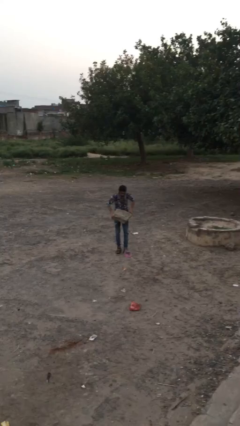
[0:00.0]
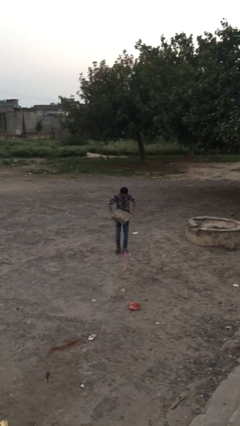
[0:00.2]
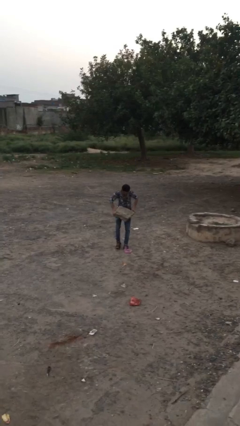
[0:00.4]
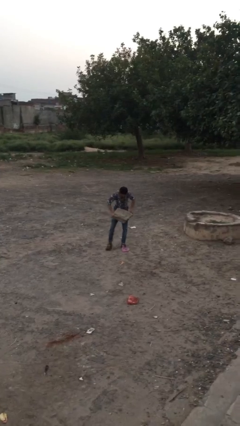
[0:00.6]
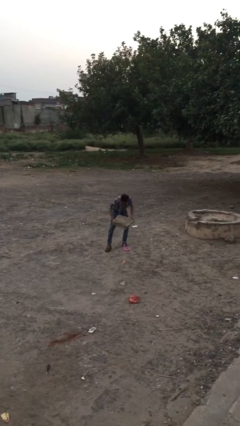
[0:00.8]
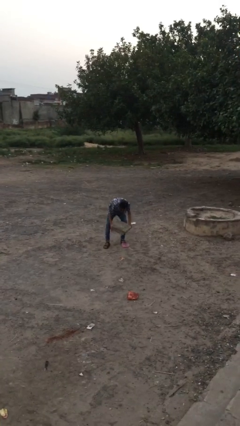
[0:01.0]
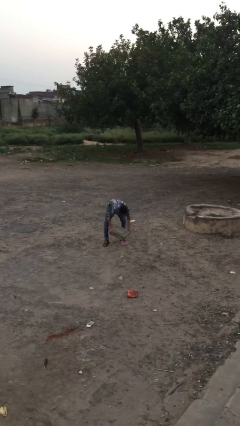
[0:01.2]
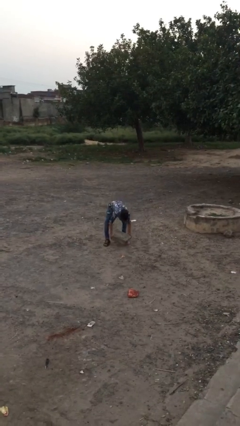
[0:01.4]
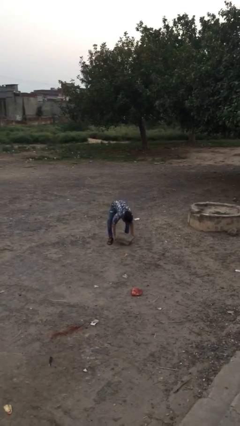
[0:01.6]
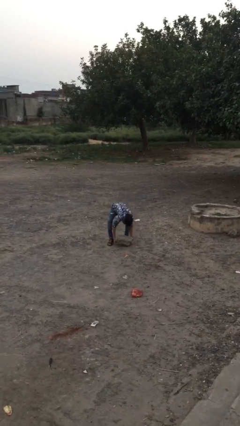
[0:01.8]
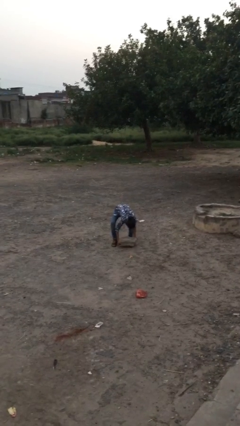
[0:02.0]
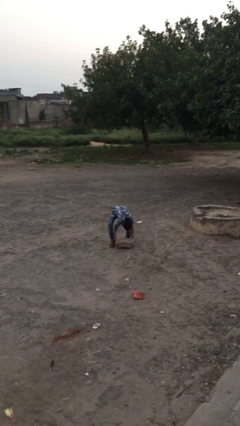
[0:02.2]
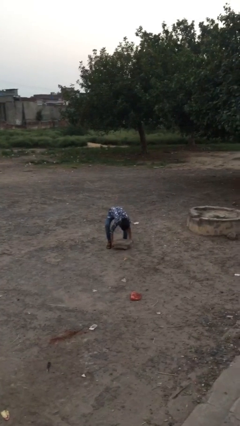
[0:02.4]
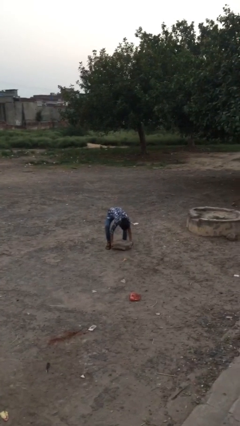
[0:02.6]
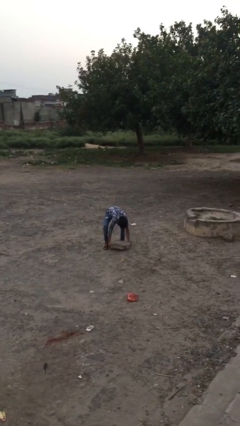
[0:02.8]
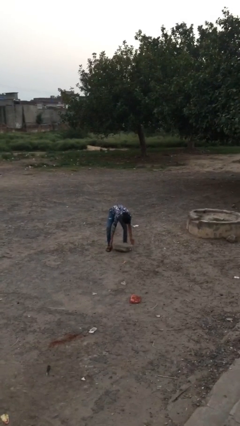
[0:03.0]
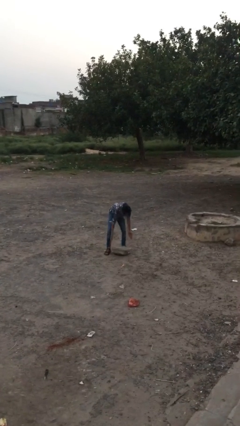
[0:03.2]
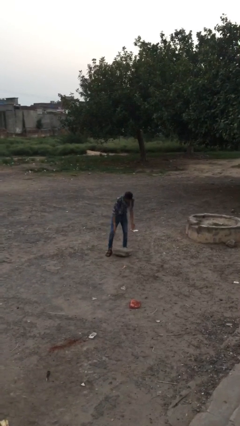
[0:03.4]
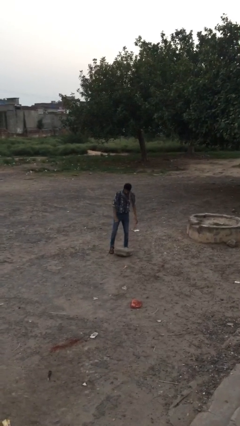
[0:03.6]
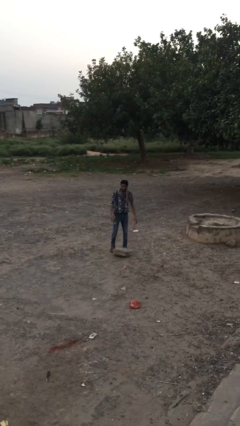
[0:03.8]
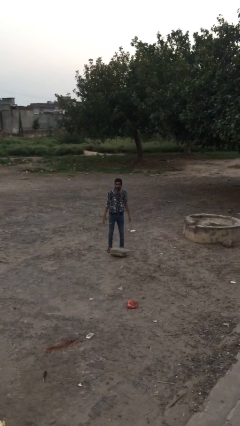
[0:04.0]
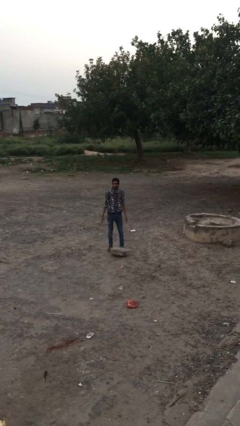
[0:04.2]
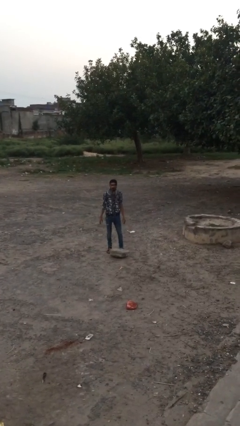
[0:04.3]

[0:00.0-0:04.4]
person puts down object on floor

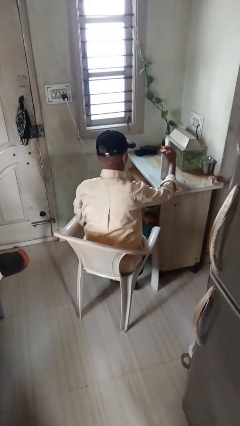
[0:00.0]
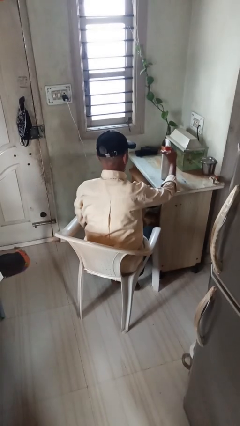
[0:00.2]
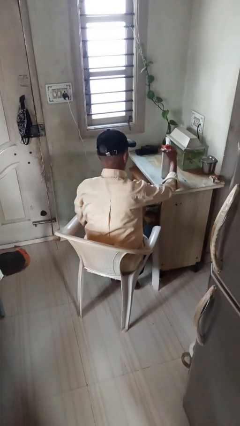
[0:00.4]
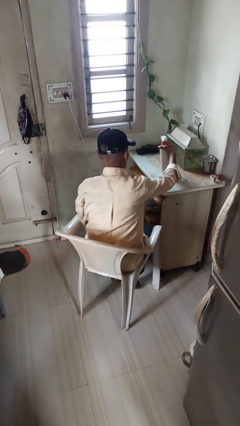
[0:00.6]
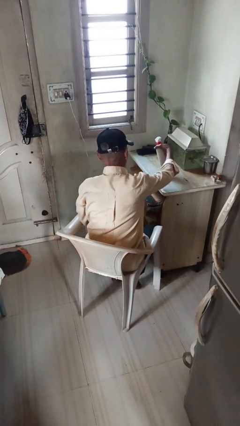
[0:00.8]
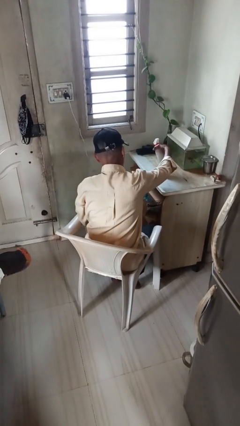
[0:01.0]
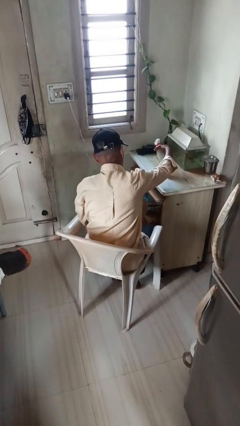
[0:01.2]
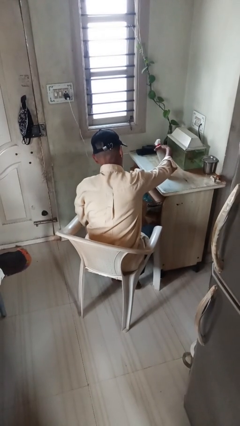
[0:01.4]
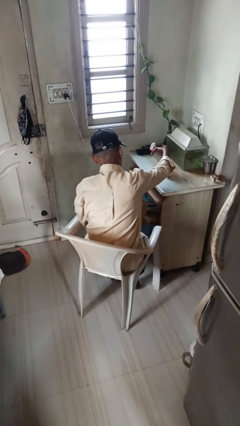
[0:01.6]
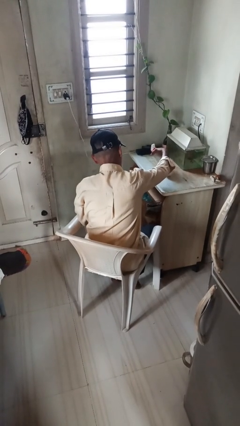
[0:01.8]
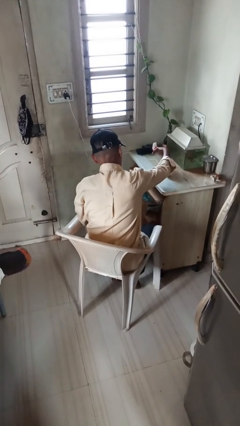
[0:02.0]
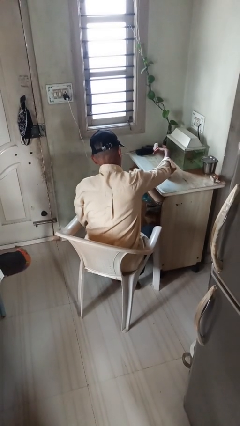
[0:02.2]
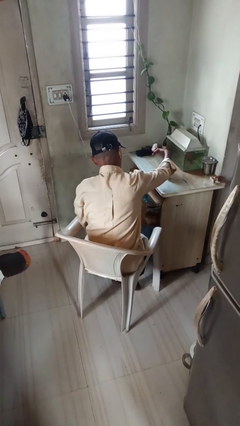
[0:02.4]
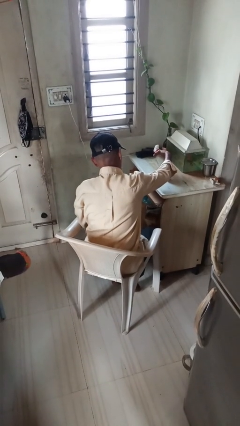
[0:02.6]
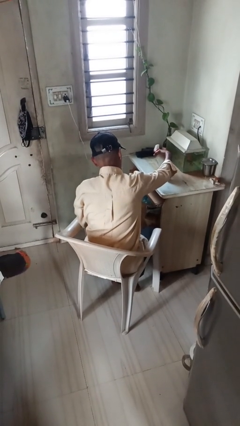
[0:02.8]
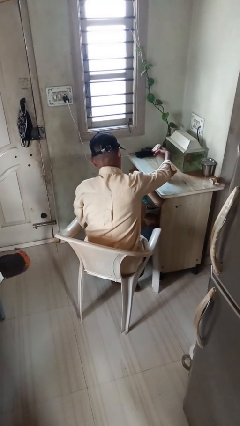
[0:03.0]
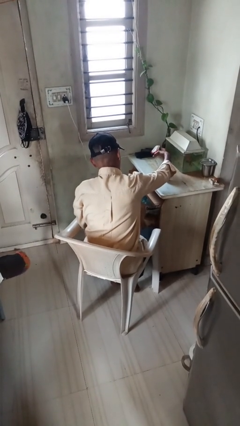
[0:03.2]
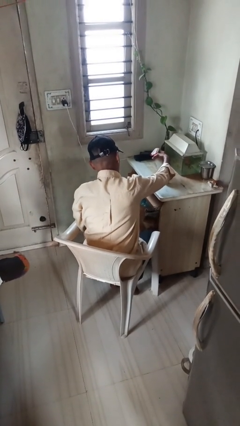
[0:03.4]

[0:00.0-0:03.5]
person sprays from bottle

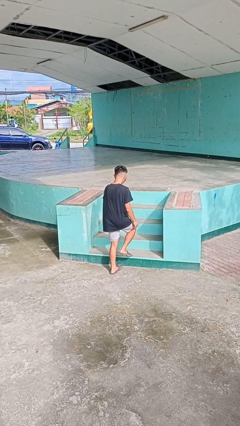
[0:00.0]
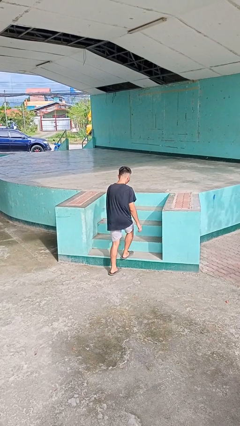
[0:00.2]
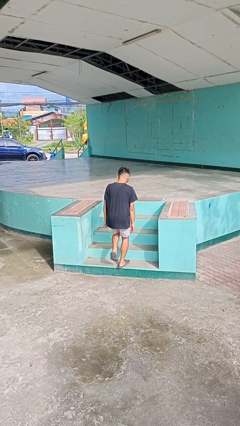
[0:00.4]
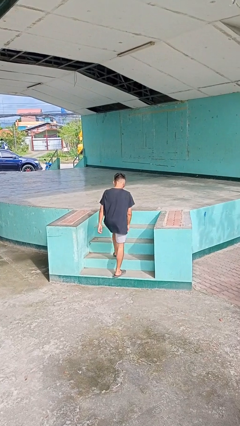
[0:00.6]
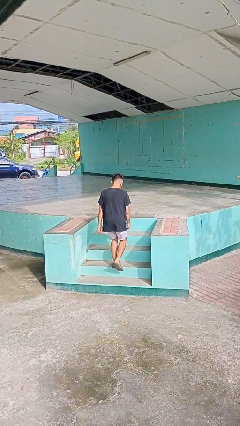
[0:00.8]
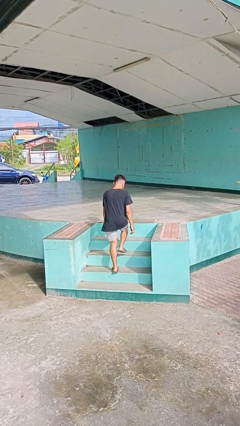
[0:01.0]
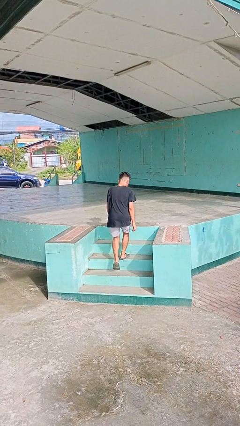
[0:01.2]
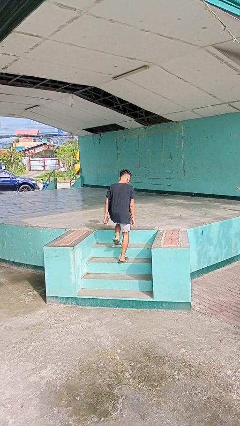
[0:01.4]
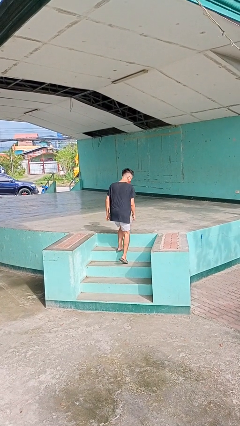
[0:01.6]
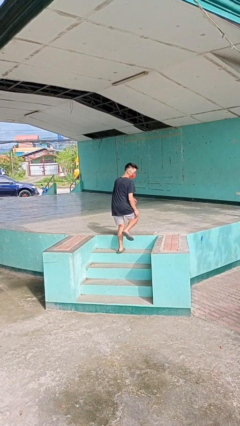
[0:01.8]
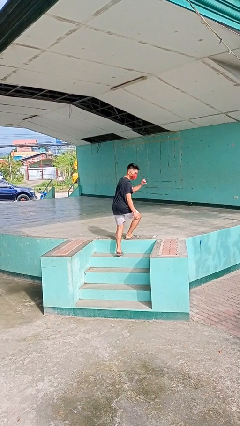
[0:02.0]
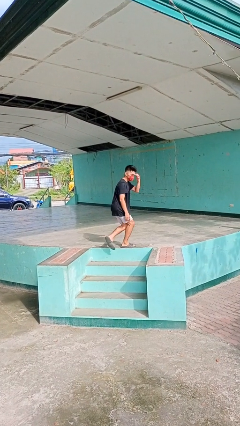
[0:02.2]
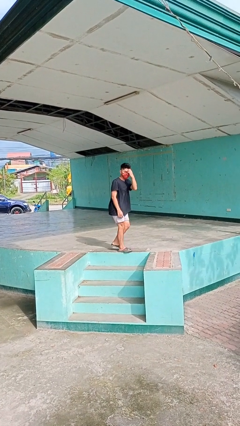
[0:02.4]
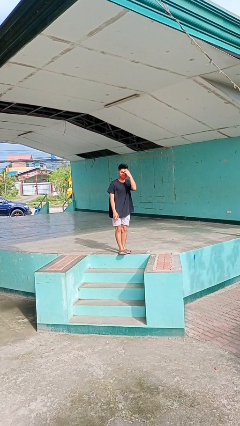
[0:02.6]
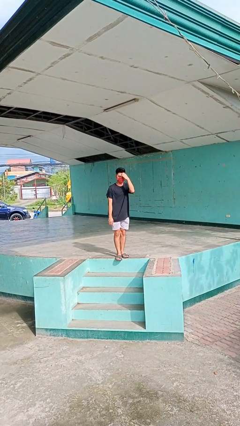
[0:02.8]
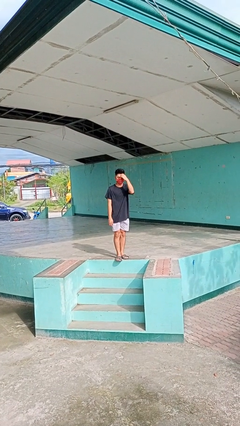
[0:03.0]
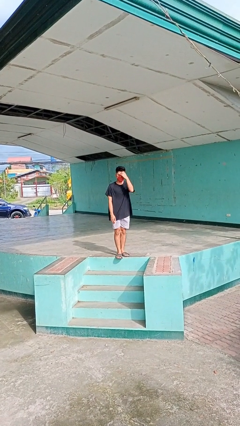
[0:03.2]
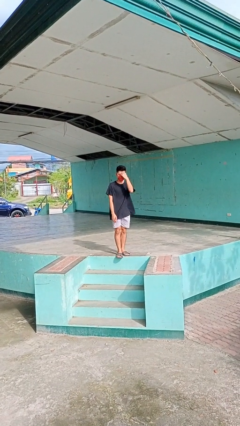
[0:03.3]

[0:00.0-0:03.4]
person climbs up stairs

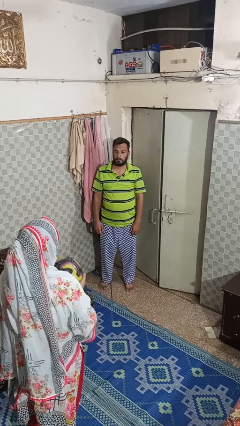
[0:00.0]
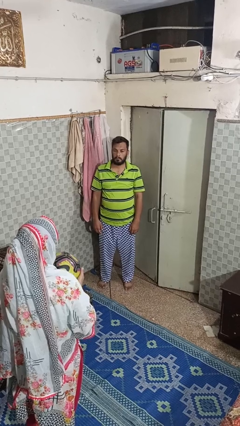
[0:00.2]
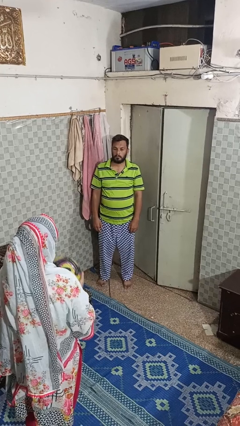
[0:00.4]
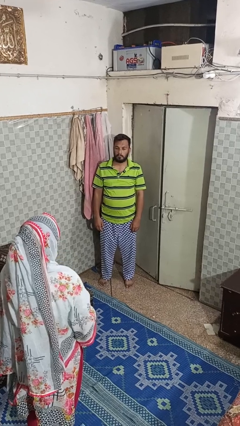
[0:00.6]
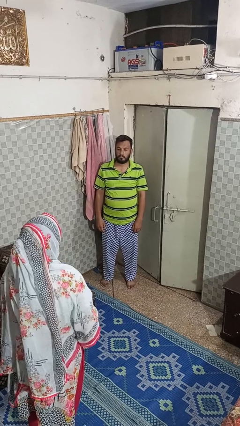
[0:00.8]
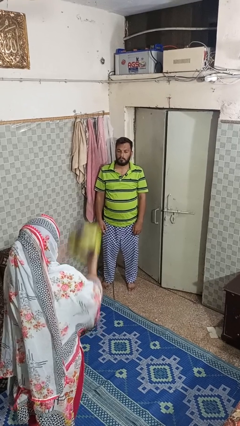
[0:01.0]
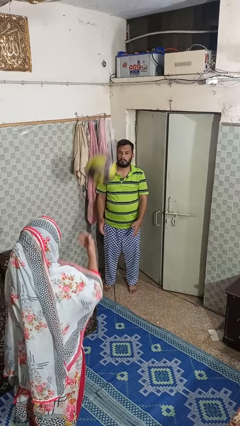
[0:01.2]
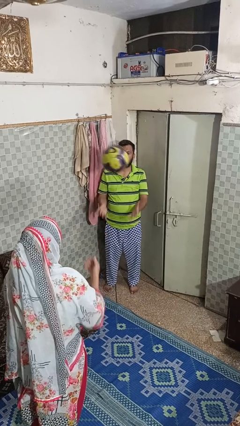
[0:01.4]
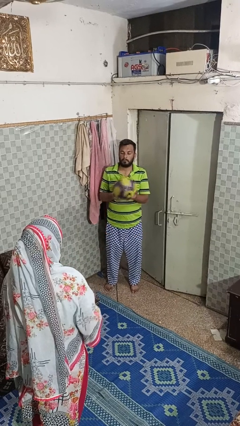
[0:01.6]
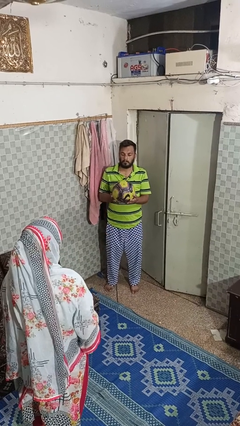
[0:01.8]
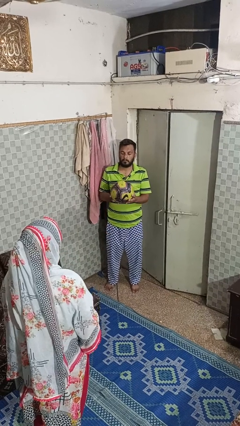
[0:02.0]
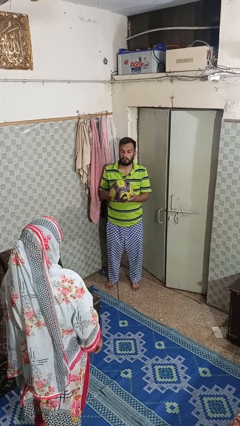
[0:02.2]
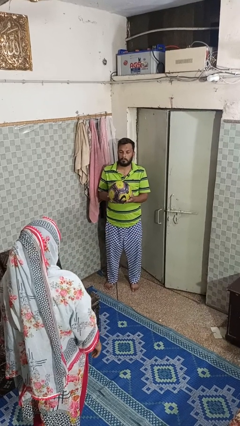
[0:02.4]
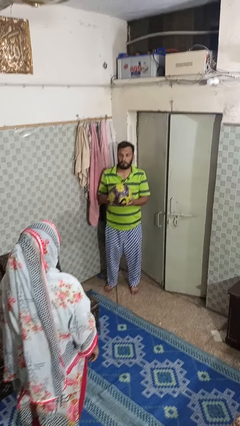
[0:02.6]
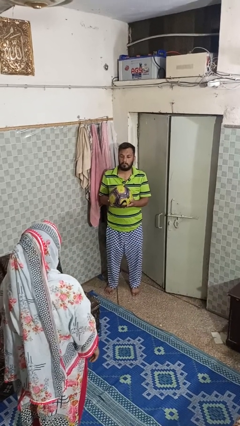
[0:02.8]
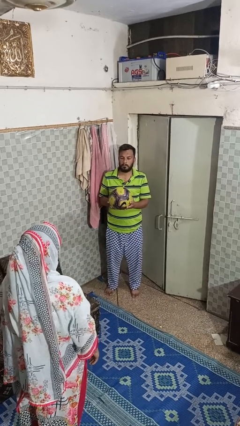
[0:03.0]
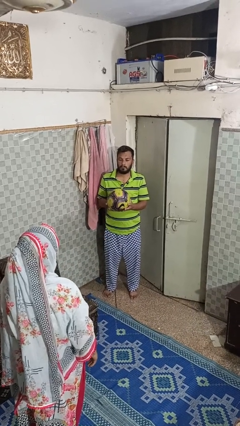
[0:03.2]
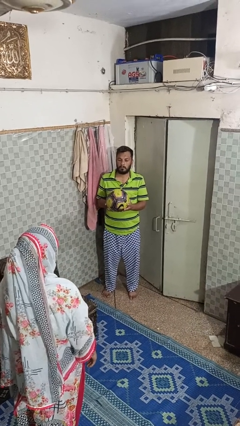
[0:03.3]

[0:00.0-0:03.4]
person catches object from person

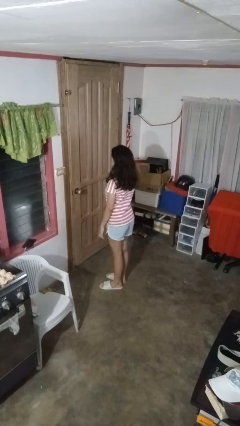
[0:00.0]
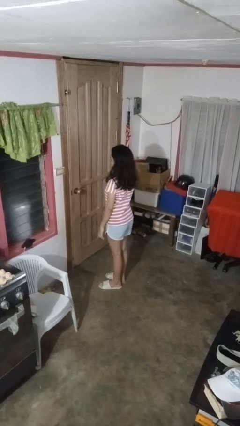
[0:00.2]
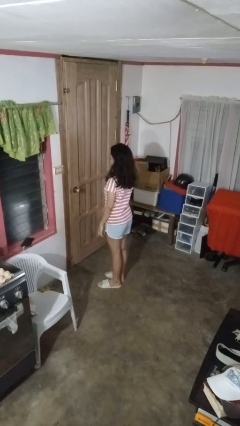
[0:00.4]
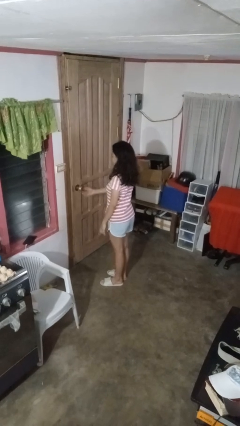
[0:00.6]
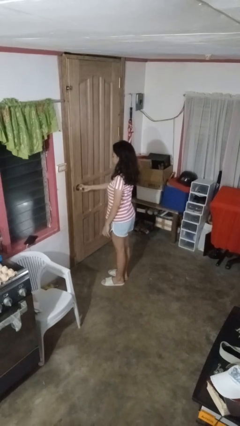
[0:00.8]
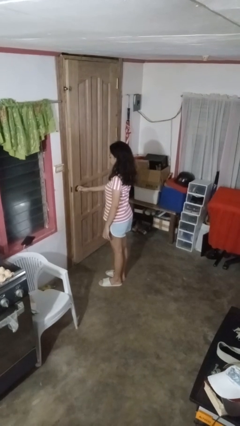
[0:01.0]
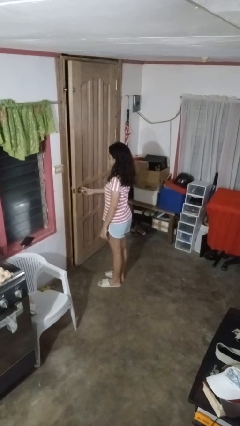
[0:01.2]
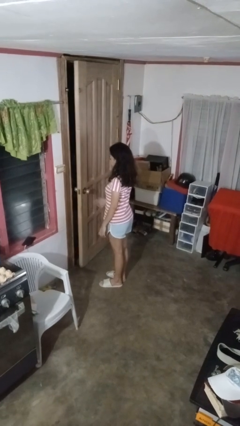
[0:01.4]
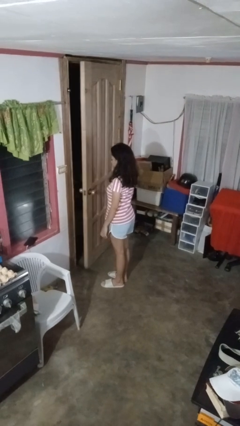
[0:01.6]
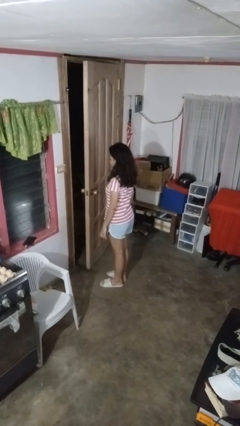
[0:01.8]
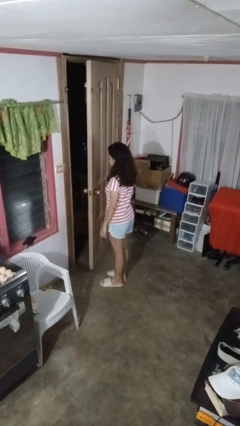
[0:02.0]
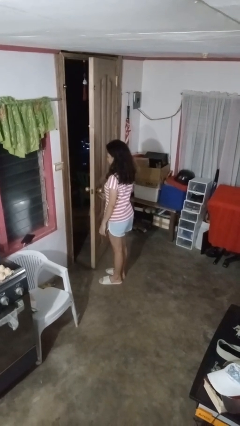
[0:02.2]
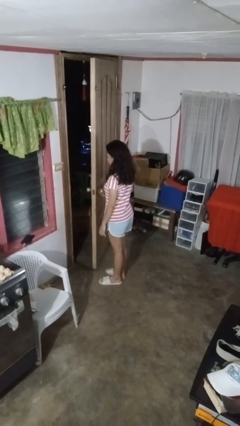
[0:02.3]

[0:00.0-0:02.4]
person opens facility door

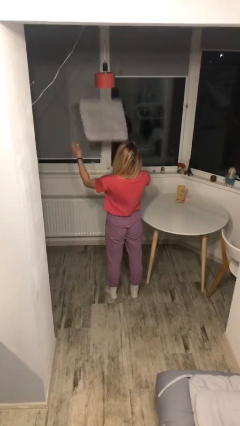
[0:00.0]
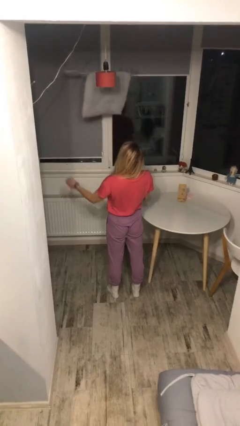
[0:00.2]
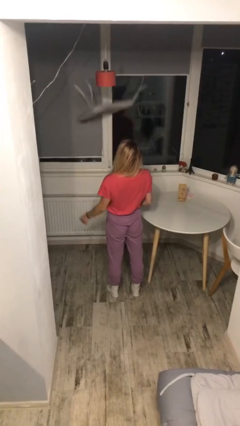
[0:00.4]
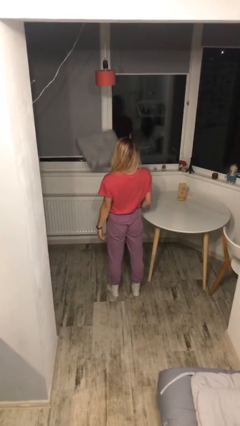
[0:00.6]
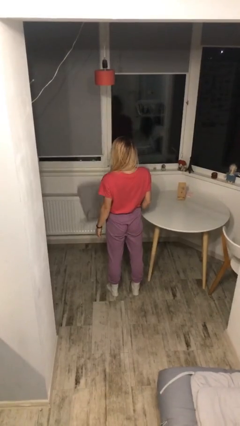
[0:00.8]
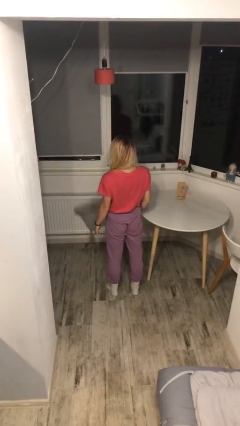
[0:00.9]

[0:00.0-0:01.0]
person throws object into air
